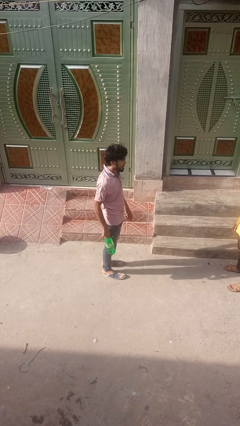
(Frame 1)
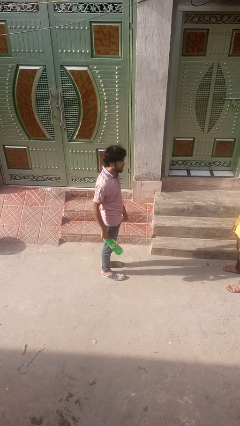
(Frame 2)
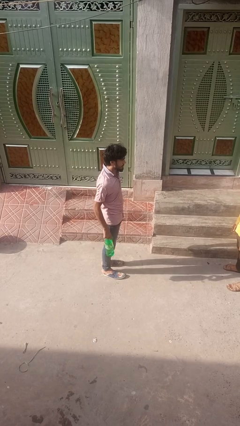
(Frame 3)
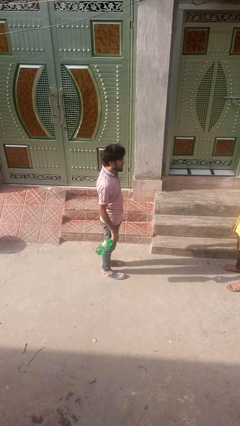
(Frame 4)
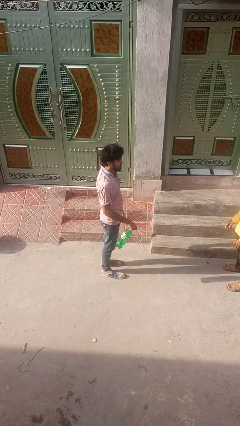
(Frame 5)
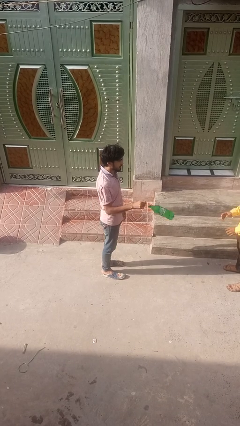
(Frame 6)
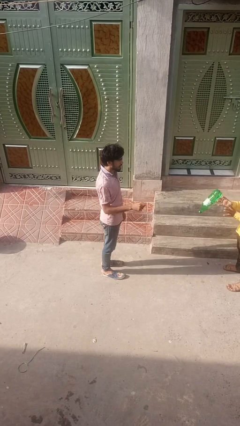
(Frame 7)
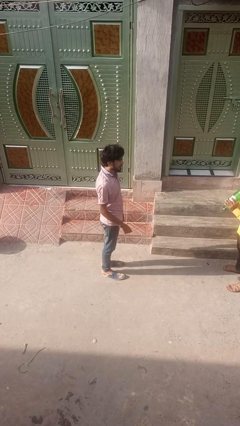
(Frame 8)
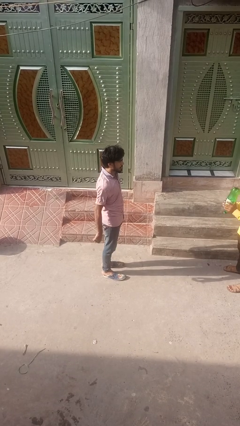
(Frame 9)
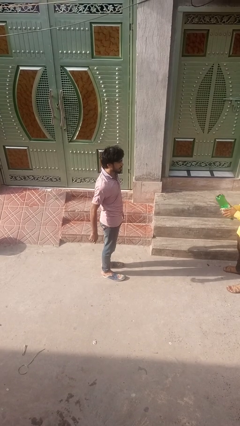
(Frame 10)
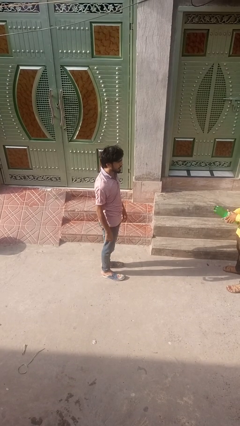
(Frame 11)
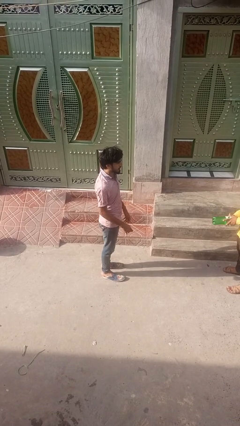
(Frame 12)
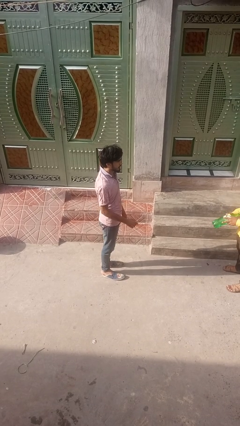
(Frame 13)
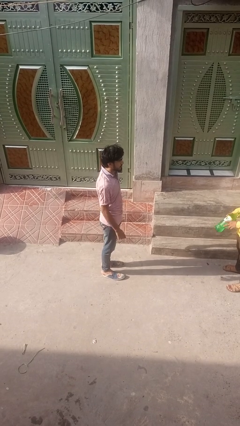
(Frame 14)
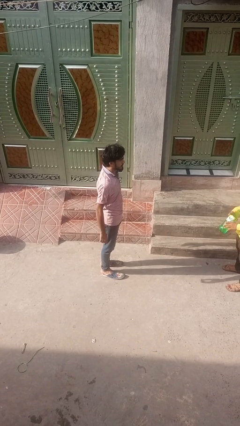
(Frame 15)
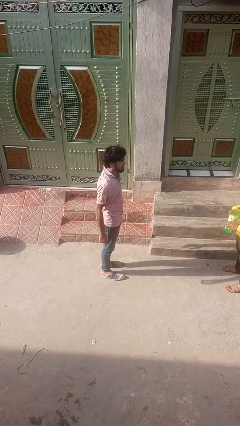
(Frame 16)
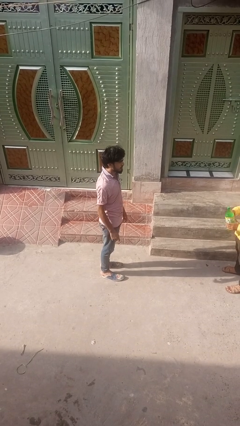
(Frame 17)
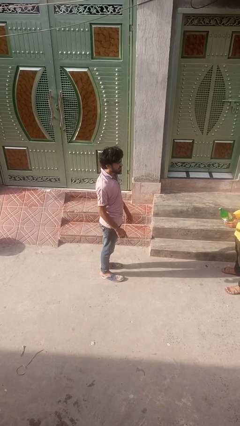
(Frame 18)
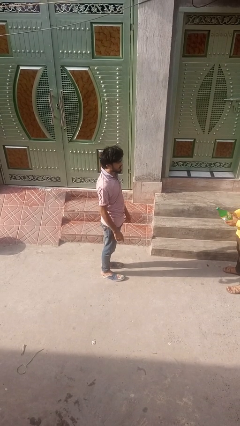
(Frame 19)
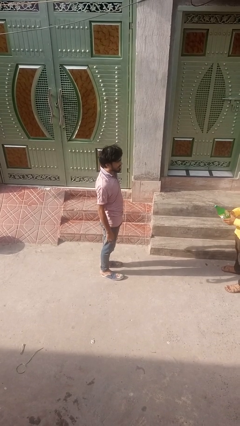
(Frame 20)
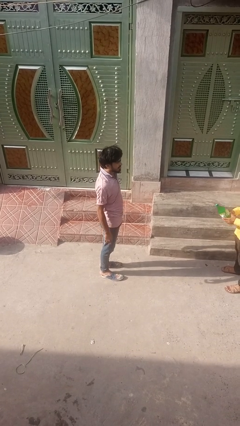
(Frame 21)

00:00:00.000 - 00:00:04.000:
person throws object to person

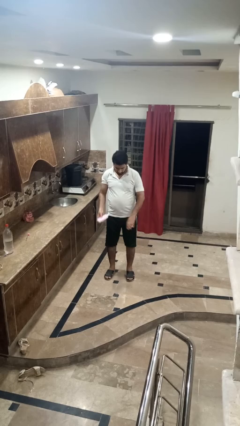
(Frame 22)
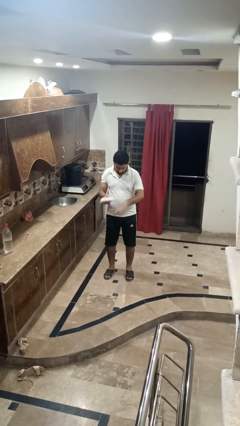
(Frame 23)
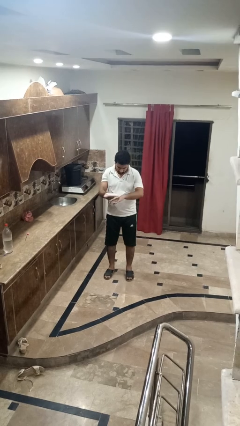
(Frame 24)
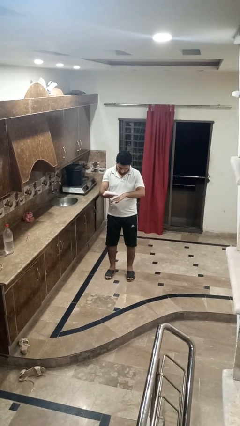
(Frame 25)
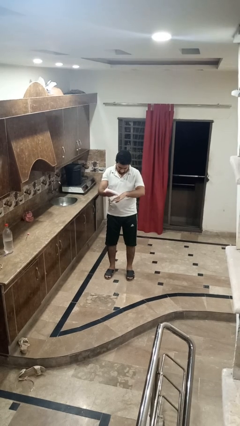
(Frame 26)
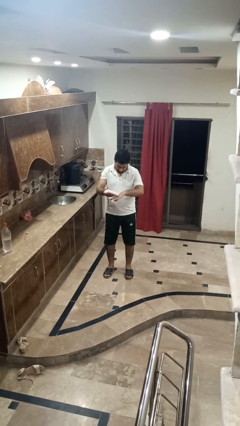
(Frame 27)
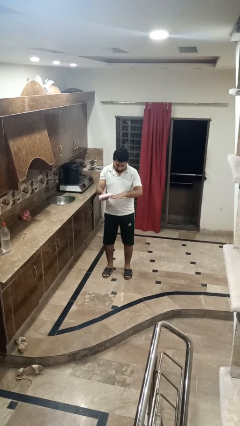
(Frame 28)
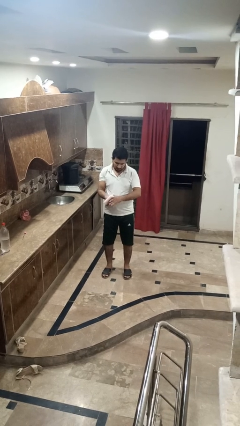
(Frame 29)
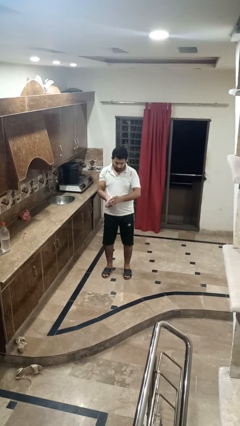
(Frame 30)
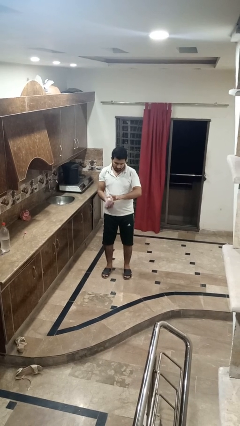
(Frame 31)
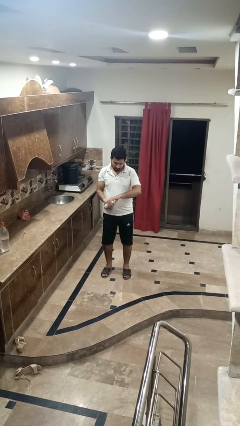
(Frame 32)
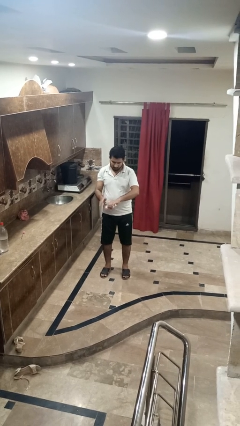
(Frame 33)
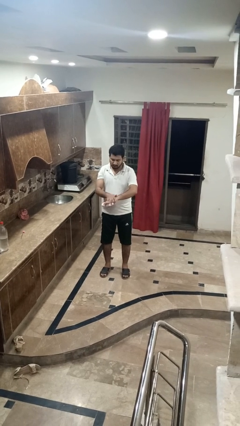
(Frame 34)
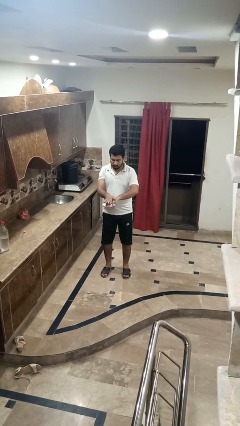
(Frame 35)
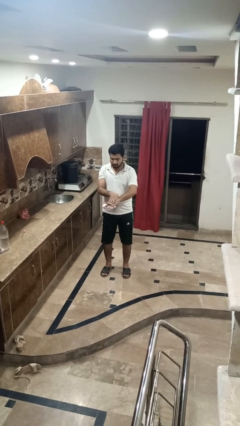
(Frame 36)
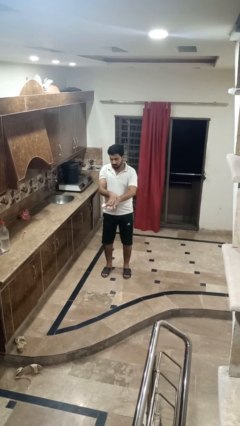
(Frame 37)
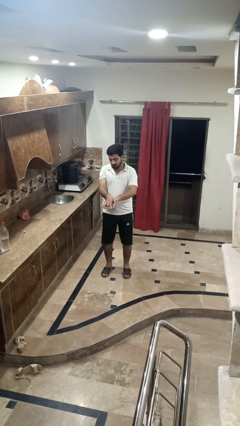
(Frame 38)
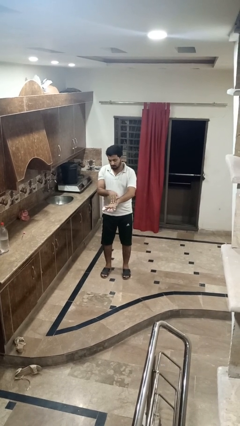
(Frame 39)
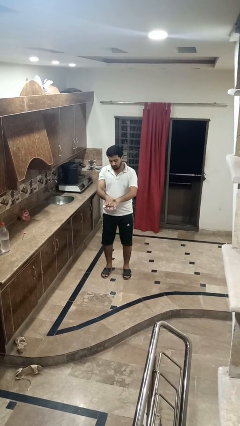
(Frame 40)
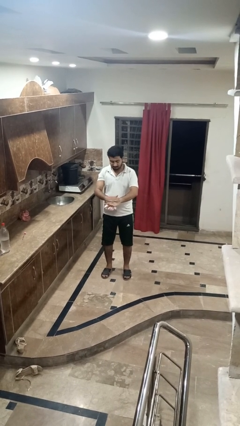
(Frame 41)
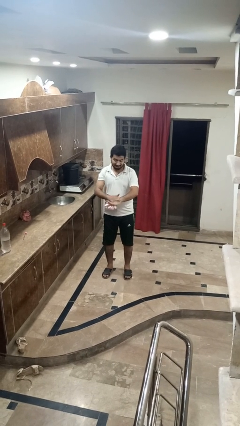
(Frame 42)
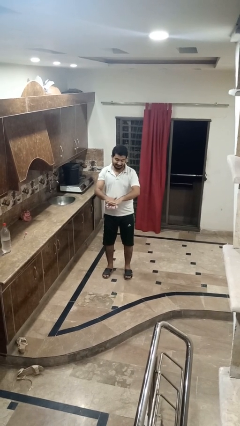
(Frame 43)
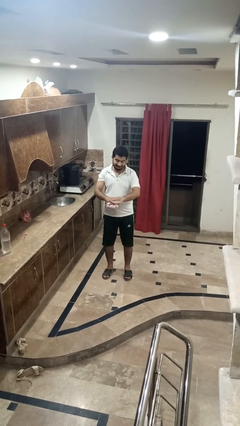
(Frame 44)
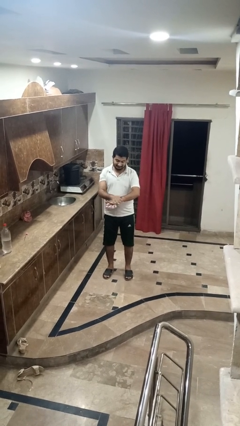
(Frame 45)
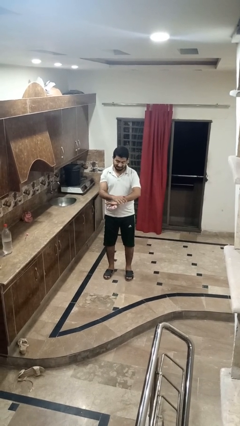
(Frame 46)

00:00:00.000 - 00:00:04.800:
person applies sunscreen

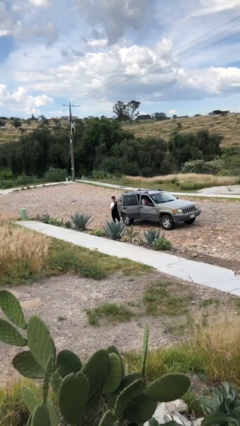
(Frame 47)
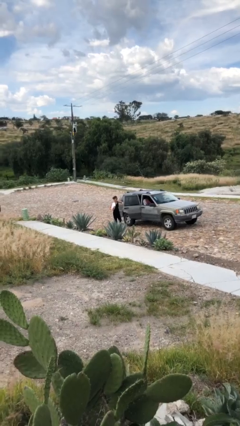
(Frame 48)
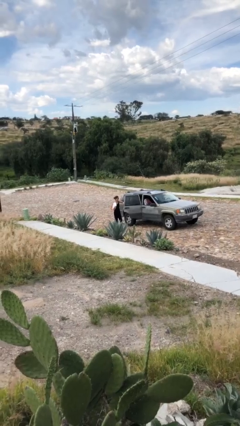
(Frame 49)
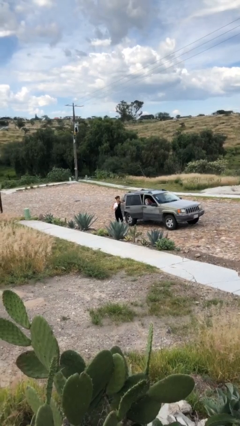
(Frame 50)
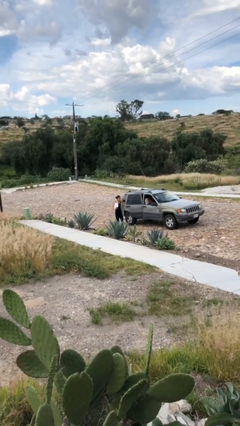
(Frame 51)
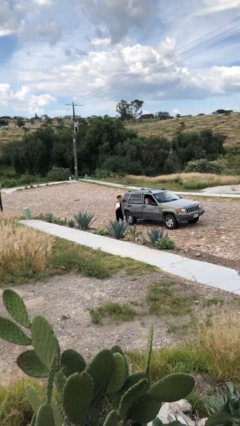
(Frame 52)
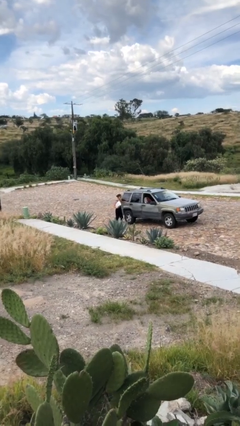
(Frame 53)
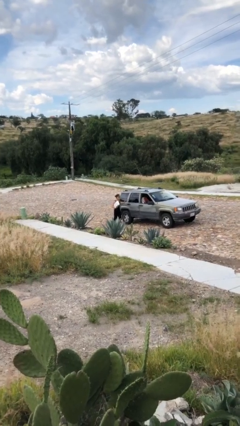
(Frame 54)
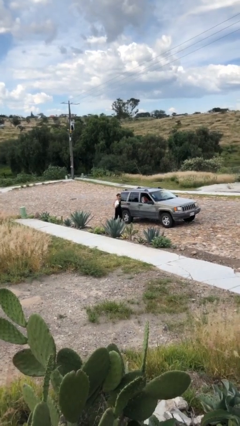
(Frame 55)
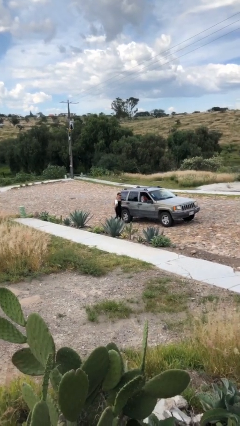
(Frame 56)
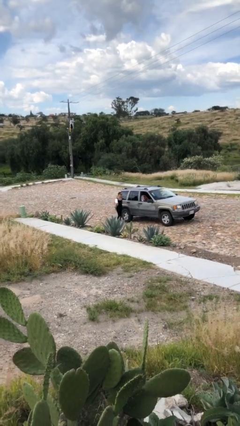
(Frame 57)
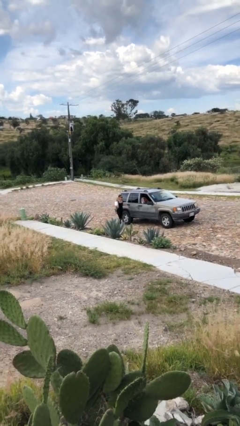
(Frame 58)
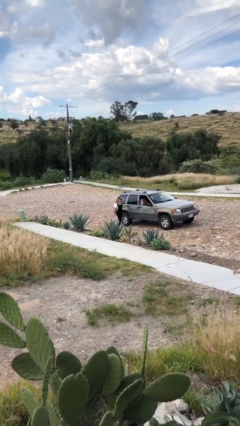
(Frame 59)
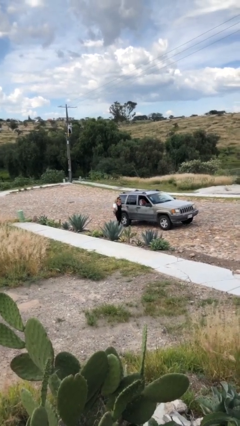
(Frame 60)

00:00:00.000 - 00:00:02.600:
person closes car door

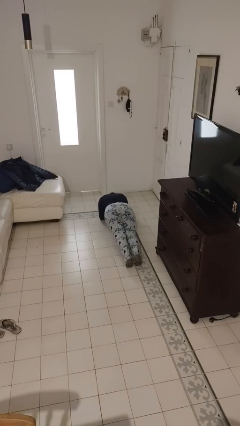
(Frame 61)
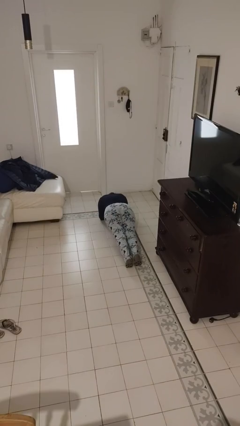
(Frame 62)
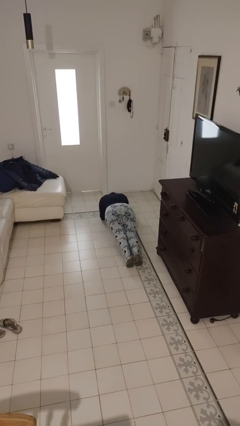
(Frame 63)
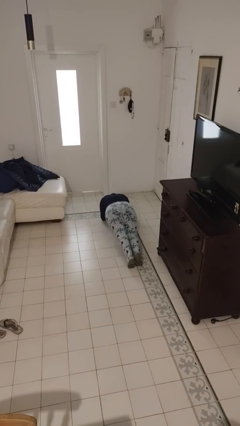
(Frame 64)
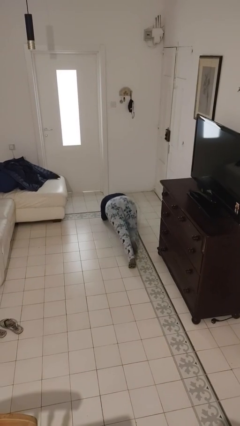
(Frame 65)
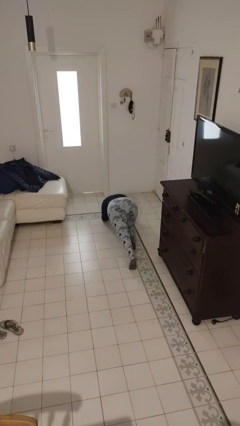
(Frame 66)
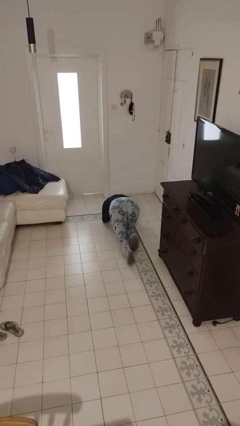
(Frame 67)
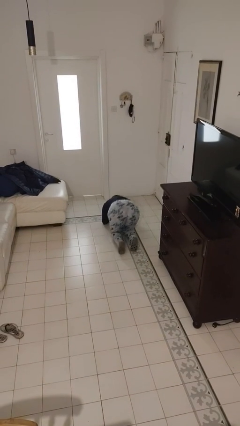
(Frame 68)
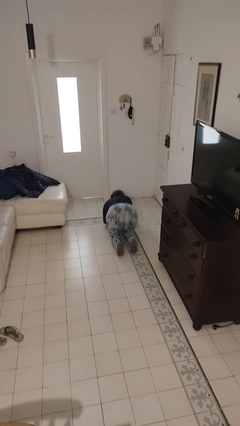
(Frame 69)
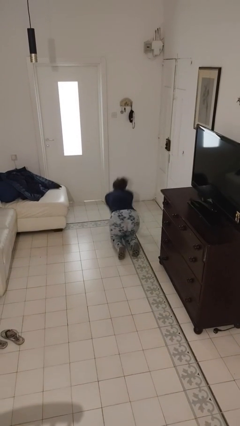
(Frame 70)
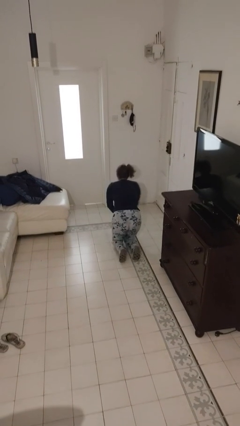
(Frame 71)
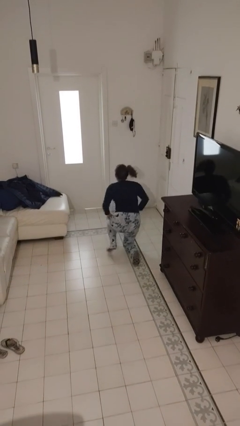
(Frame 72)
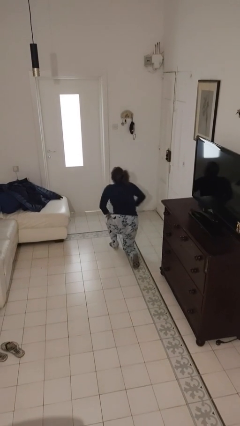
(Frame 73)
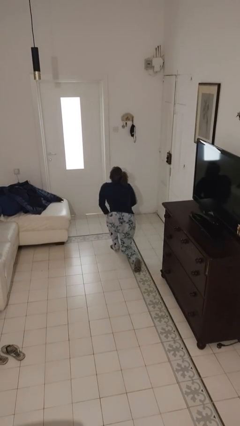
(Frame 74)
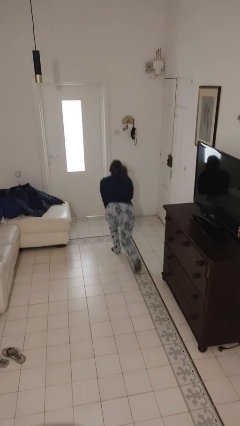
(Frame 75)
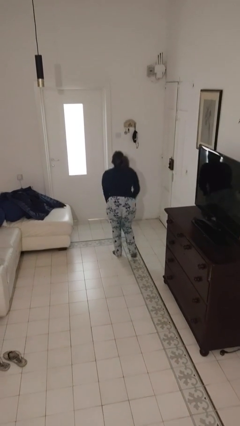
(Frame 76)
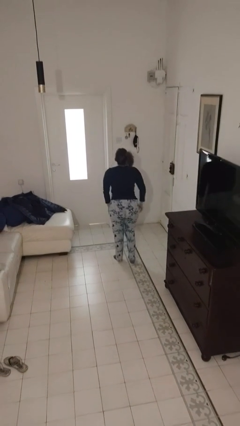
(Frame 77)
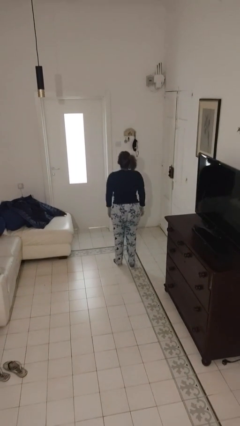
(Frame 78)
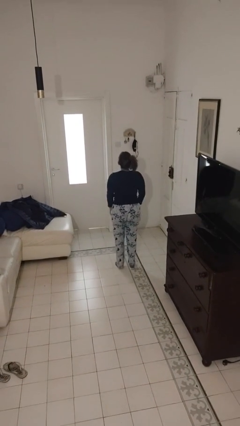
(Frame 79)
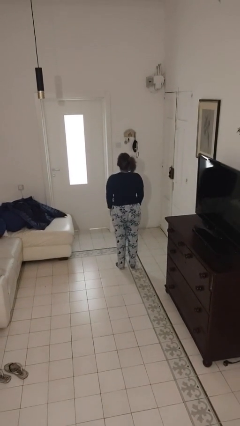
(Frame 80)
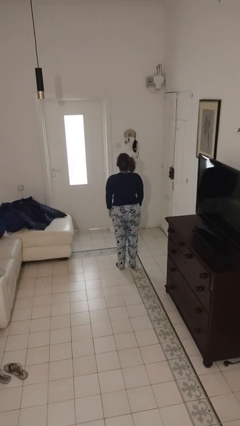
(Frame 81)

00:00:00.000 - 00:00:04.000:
person stands up from floor

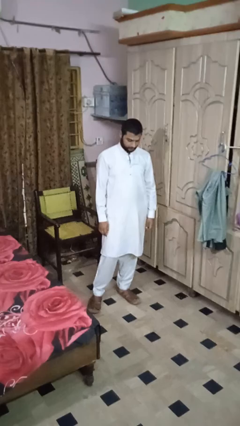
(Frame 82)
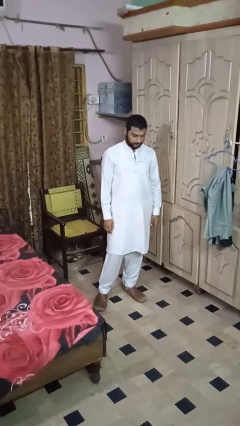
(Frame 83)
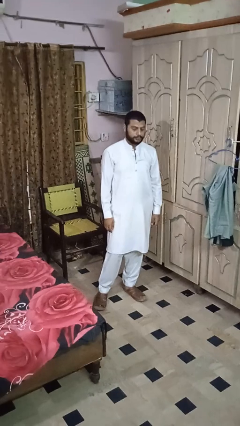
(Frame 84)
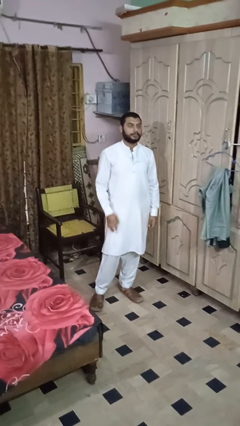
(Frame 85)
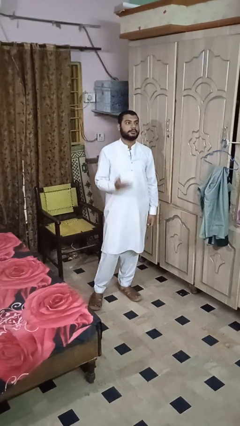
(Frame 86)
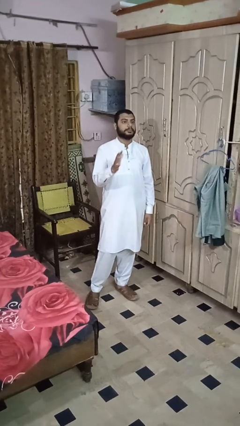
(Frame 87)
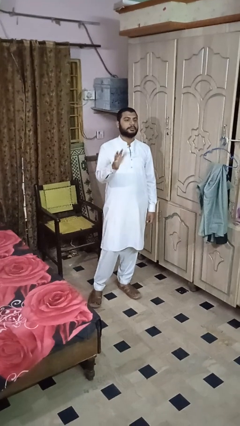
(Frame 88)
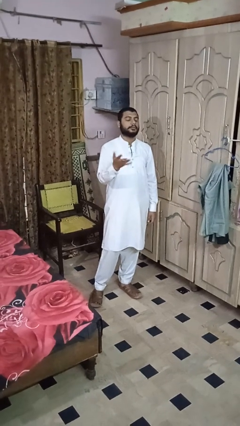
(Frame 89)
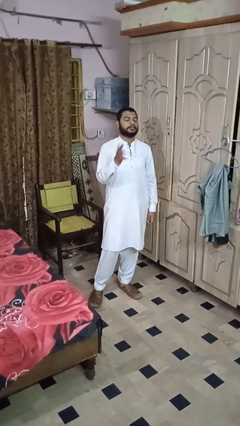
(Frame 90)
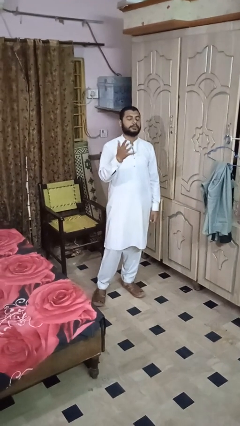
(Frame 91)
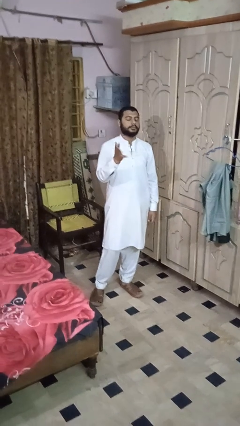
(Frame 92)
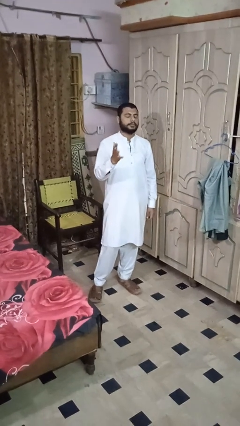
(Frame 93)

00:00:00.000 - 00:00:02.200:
person shakes head
